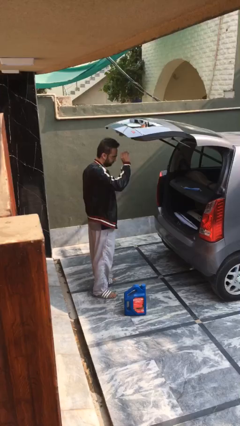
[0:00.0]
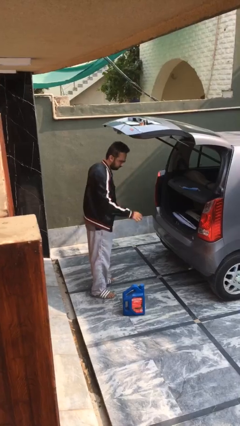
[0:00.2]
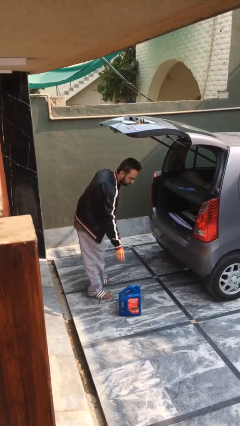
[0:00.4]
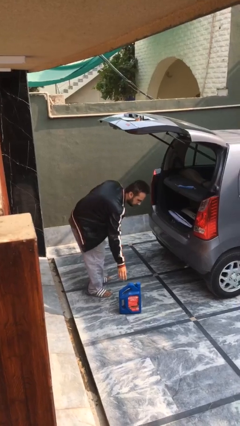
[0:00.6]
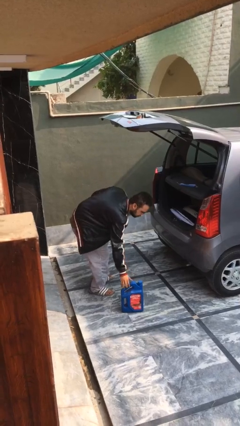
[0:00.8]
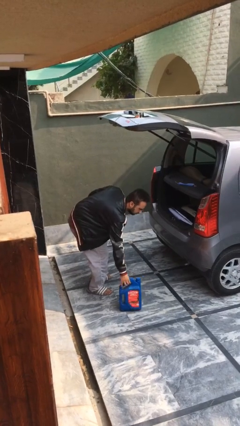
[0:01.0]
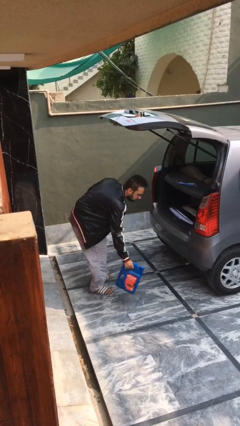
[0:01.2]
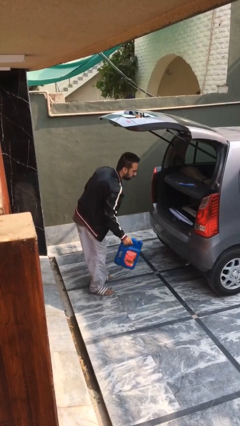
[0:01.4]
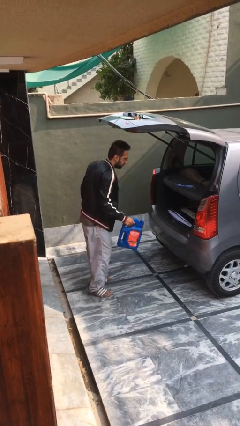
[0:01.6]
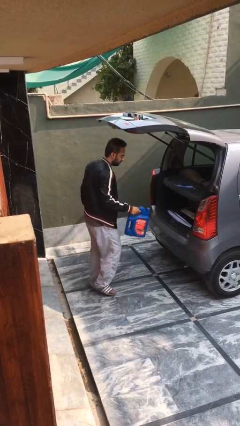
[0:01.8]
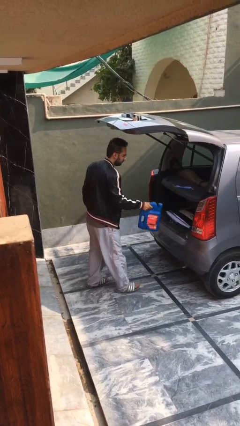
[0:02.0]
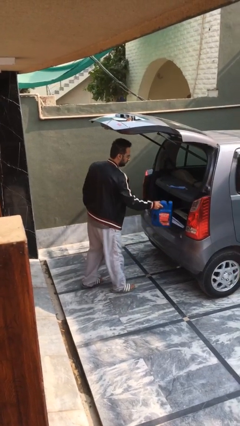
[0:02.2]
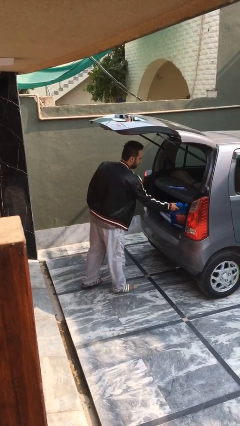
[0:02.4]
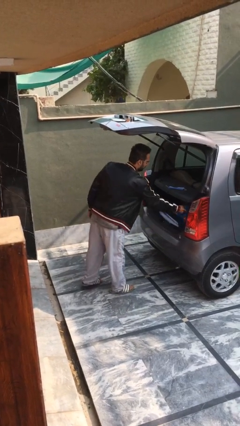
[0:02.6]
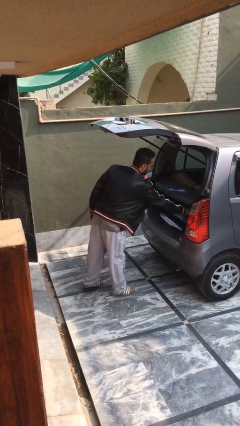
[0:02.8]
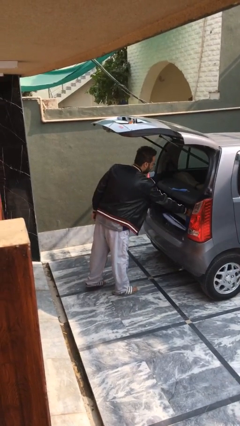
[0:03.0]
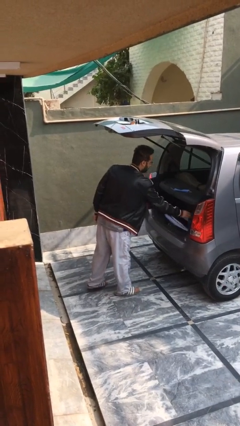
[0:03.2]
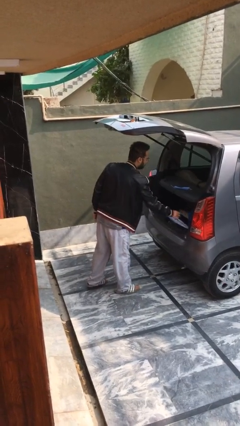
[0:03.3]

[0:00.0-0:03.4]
person loads car

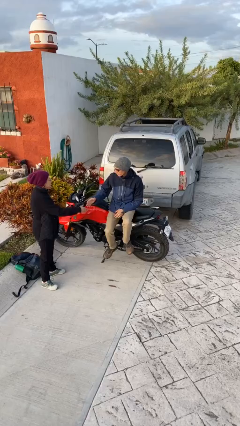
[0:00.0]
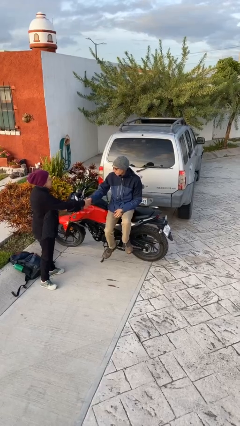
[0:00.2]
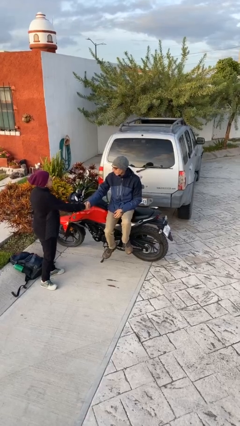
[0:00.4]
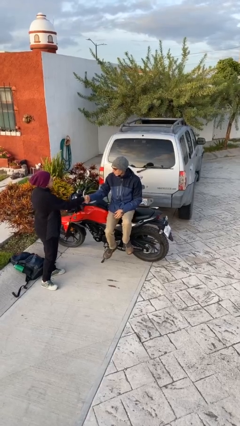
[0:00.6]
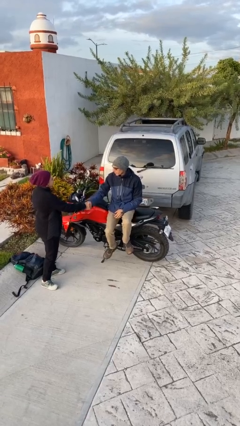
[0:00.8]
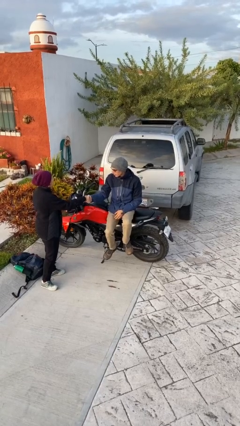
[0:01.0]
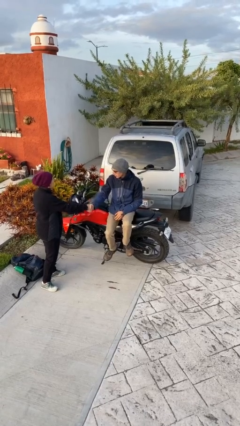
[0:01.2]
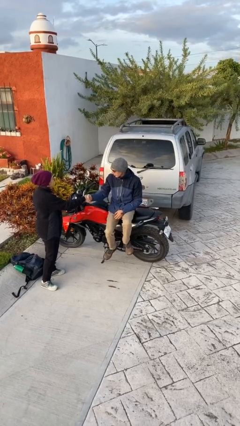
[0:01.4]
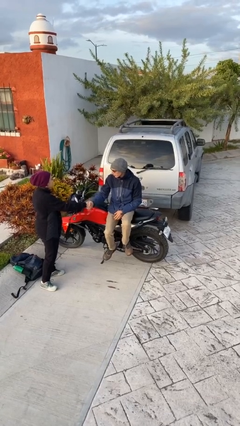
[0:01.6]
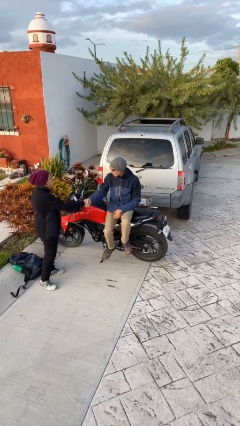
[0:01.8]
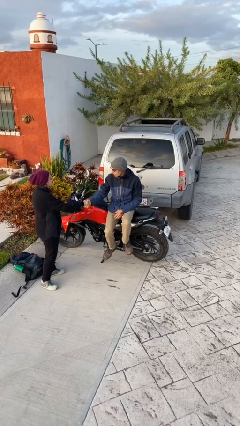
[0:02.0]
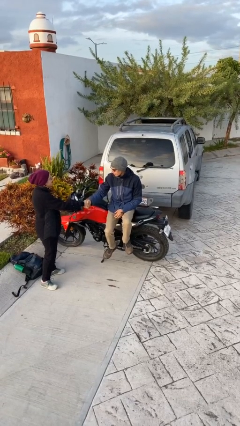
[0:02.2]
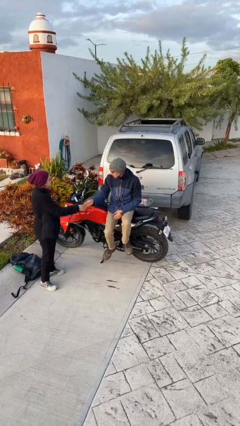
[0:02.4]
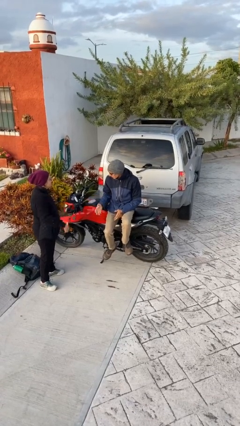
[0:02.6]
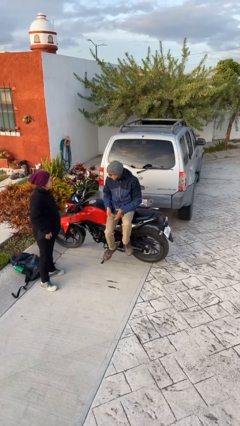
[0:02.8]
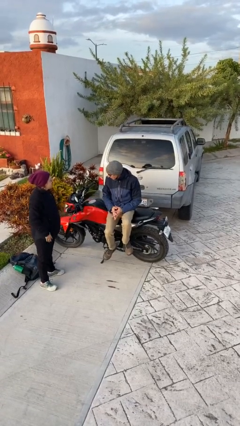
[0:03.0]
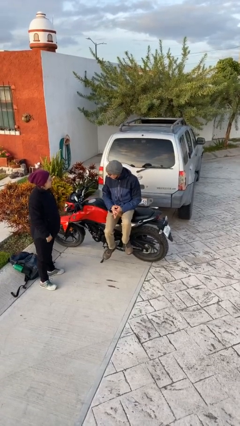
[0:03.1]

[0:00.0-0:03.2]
person shakes hand

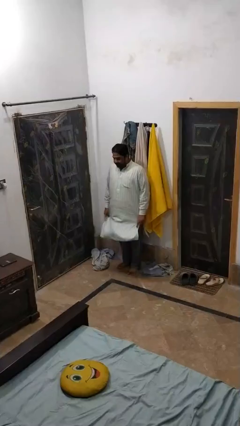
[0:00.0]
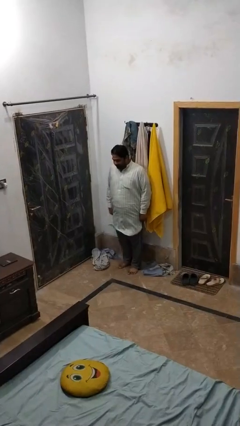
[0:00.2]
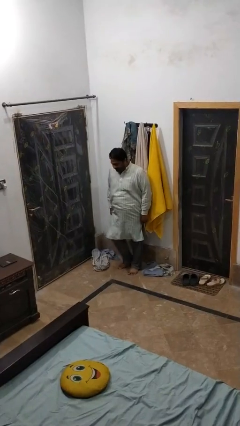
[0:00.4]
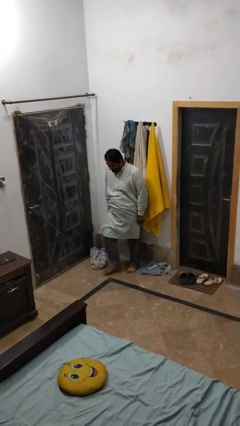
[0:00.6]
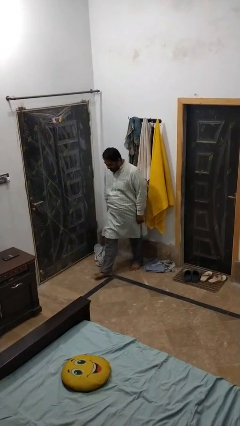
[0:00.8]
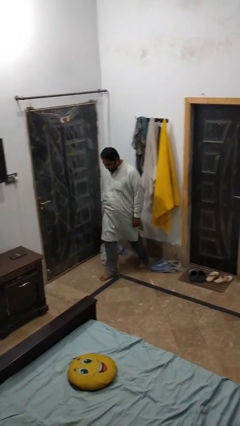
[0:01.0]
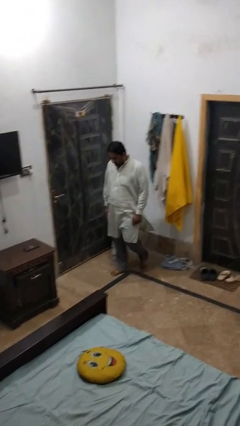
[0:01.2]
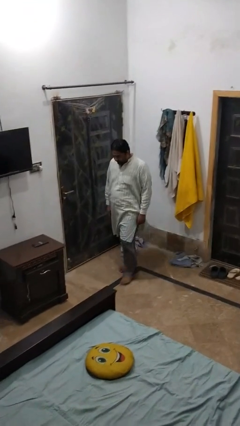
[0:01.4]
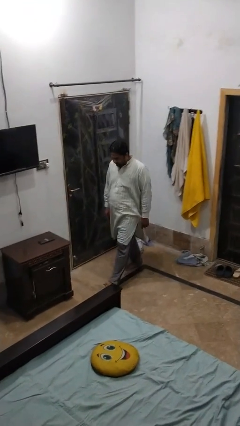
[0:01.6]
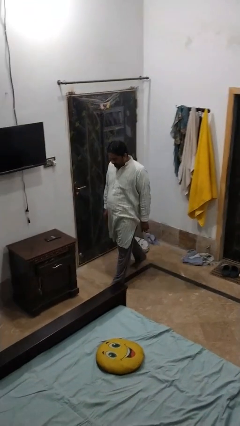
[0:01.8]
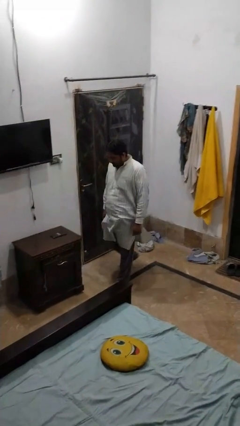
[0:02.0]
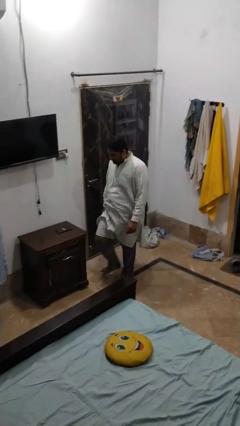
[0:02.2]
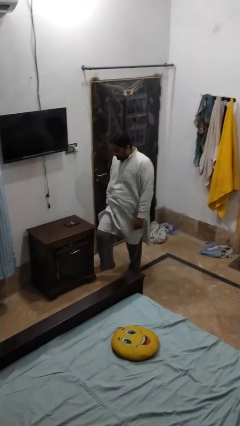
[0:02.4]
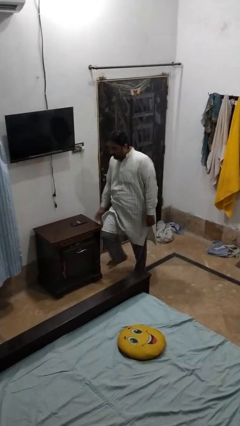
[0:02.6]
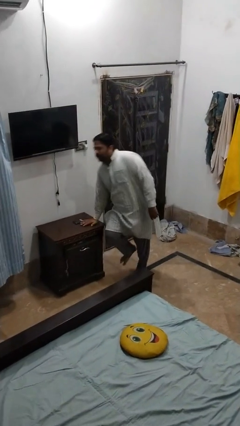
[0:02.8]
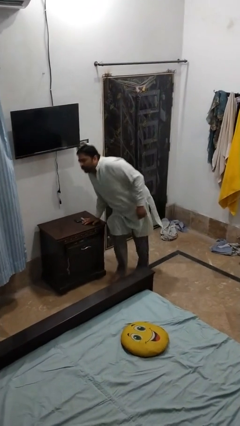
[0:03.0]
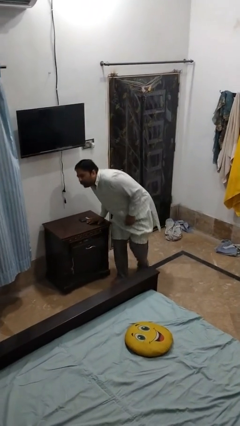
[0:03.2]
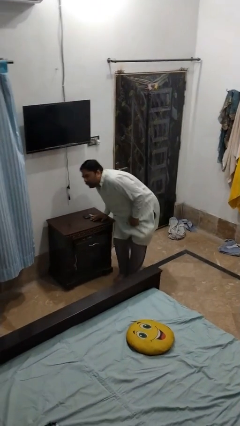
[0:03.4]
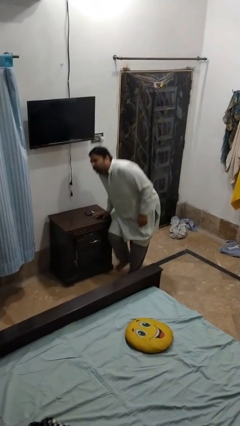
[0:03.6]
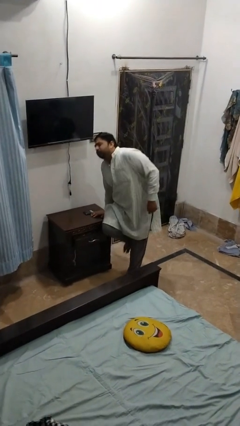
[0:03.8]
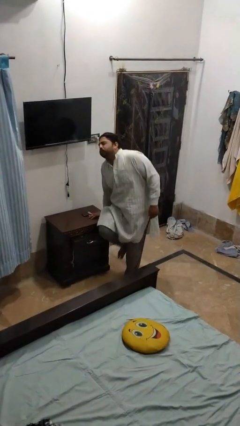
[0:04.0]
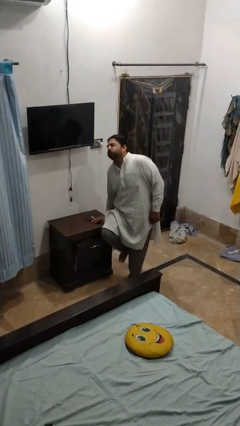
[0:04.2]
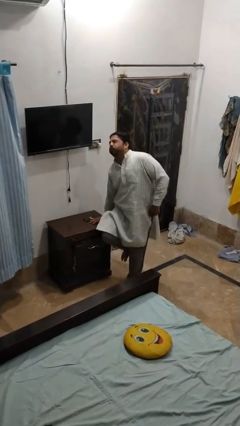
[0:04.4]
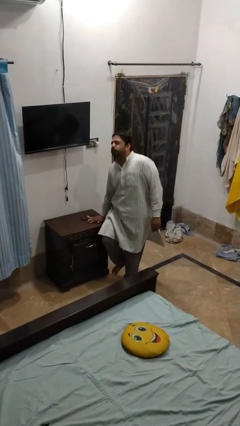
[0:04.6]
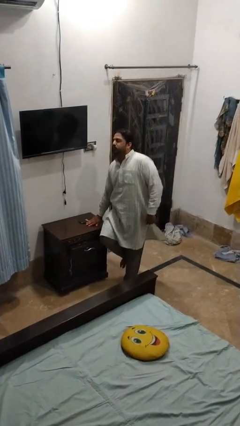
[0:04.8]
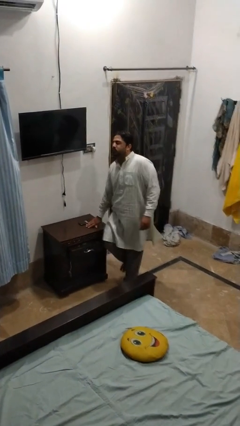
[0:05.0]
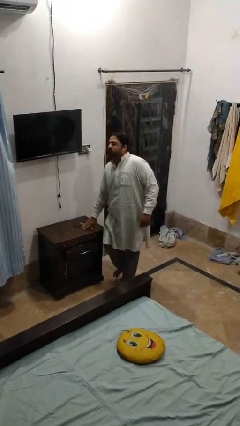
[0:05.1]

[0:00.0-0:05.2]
person shrugs

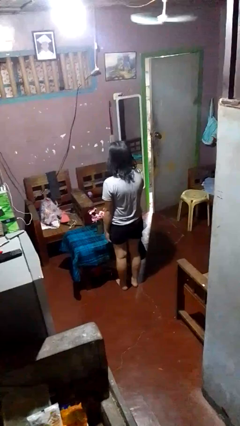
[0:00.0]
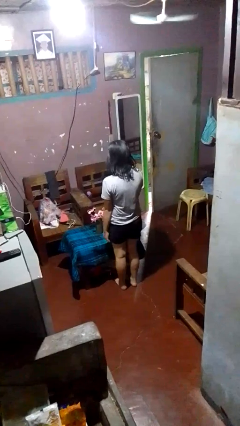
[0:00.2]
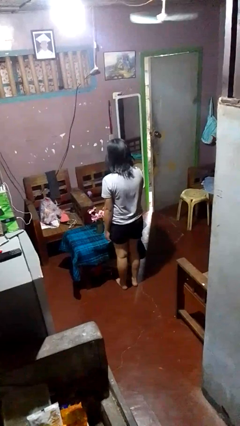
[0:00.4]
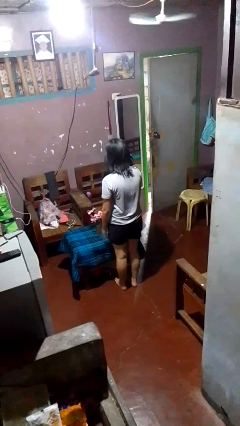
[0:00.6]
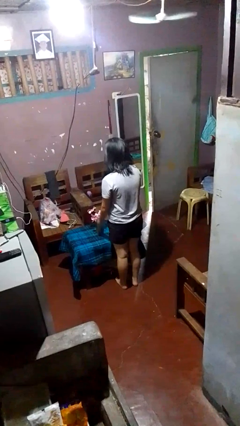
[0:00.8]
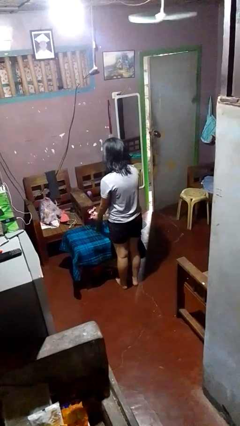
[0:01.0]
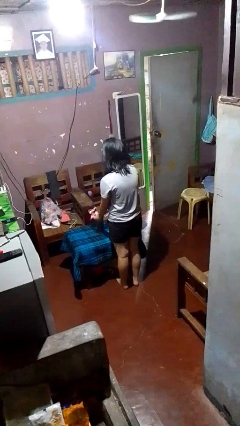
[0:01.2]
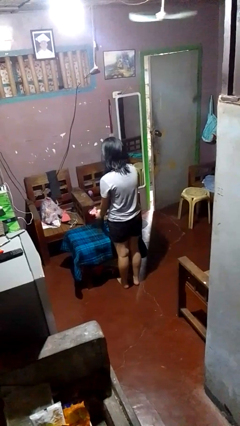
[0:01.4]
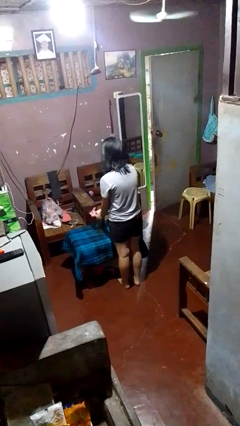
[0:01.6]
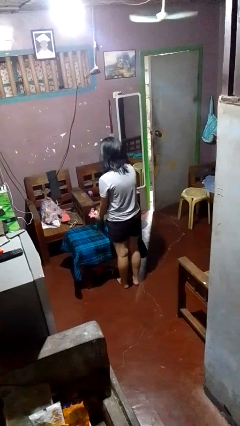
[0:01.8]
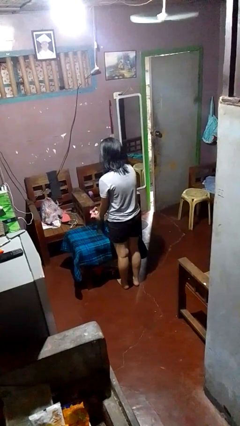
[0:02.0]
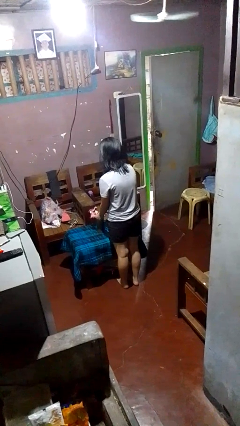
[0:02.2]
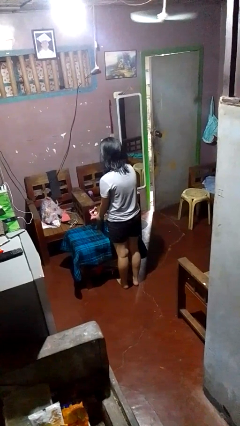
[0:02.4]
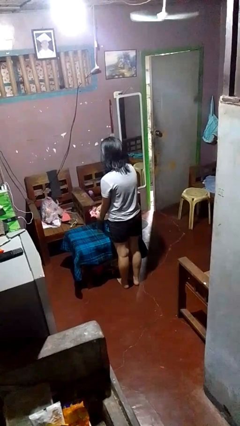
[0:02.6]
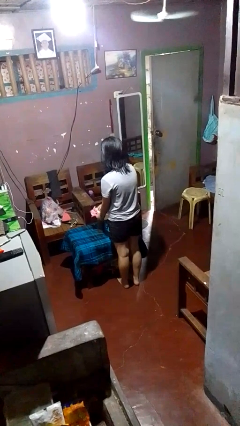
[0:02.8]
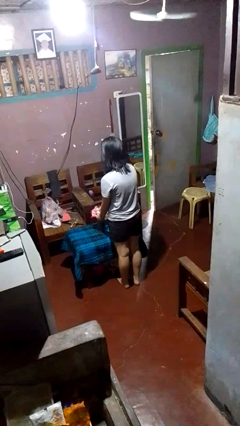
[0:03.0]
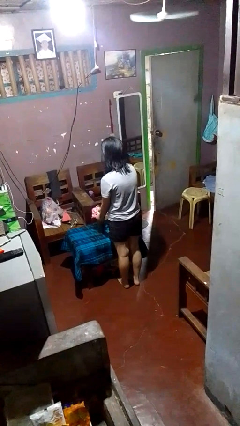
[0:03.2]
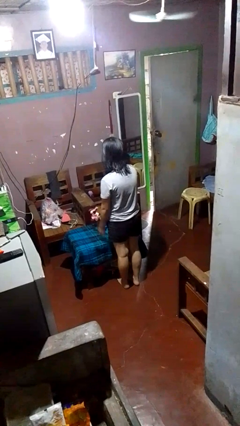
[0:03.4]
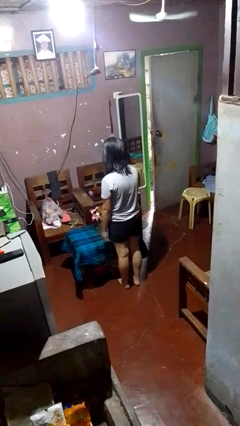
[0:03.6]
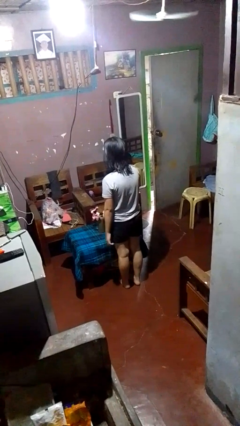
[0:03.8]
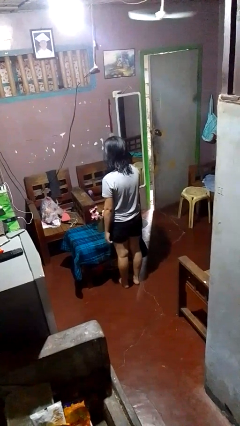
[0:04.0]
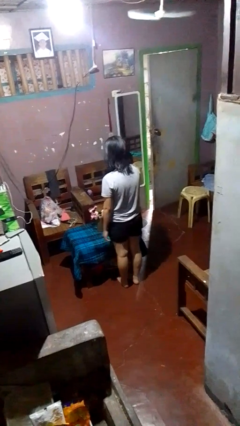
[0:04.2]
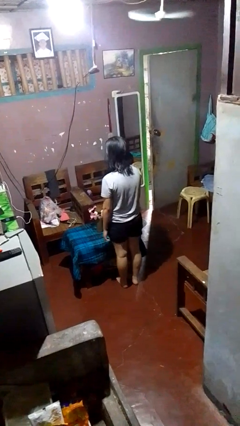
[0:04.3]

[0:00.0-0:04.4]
person arranges flowers in vase

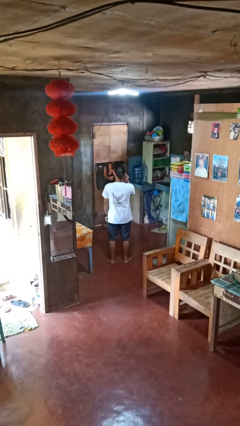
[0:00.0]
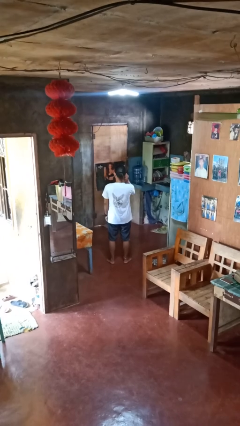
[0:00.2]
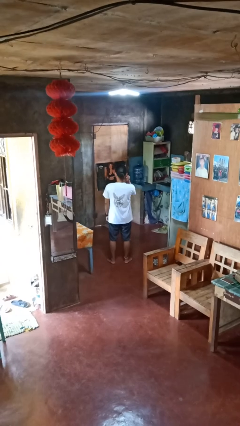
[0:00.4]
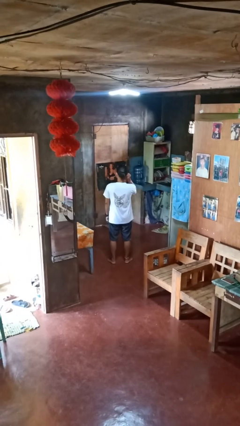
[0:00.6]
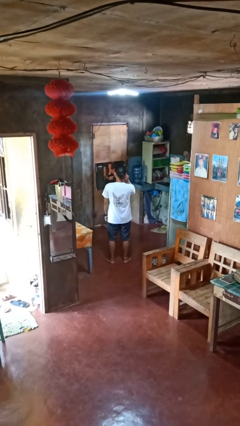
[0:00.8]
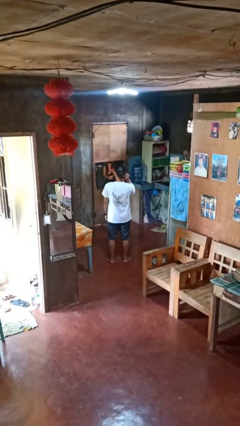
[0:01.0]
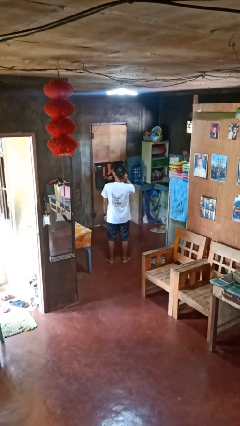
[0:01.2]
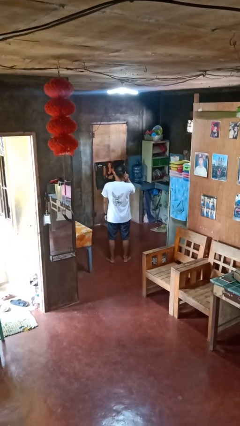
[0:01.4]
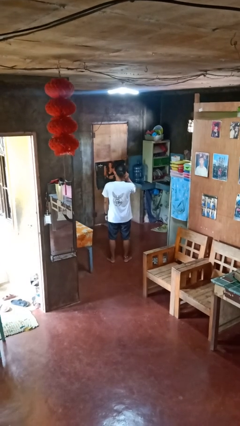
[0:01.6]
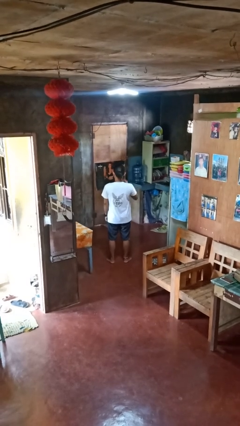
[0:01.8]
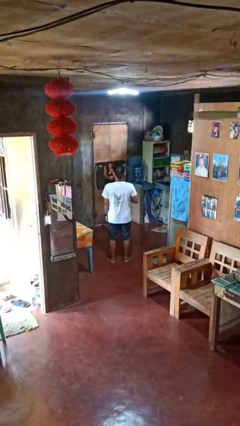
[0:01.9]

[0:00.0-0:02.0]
person touches earlobe
